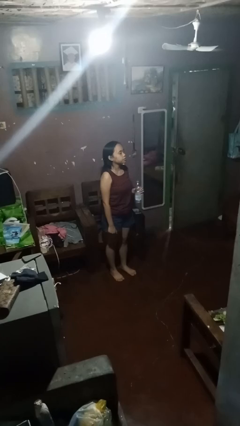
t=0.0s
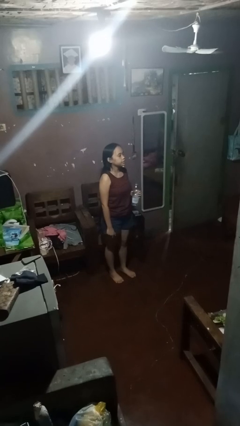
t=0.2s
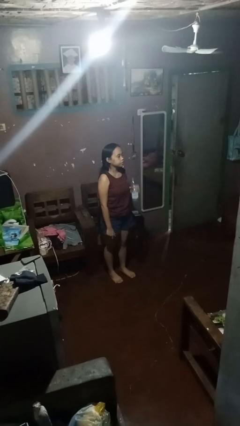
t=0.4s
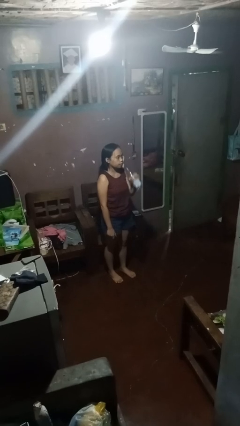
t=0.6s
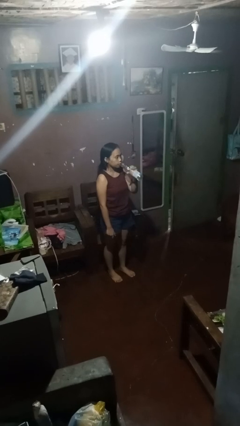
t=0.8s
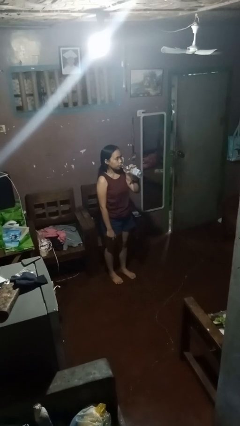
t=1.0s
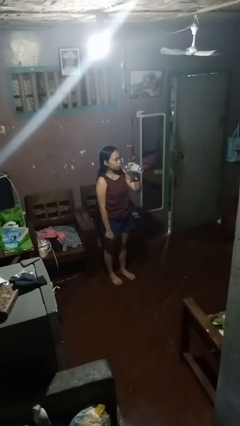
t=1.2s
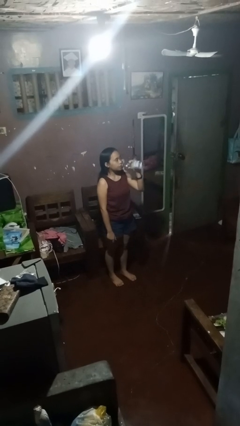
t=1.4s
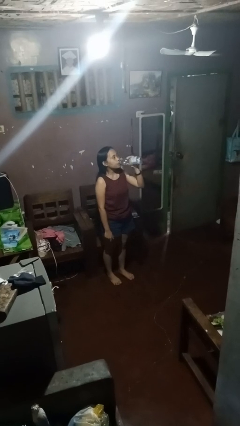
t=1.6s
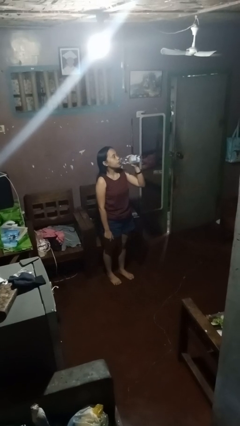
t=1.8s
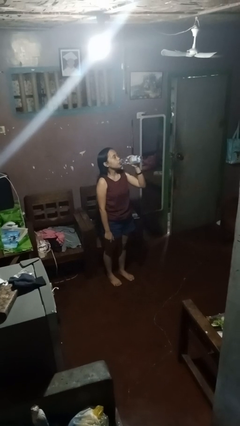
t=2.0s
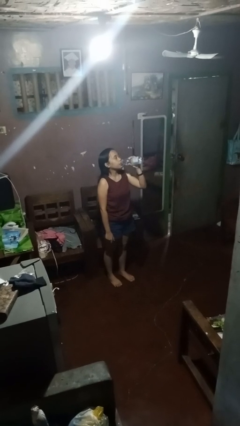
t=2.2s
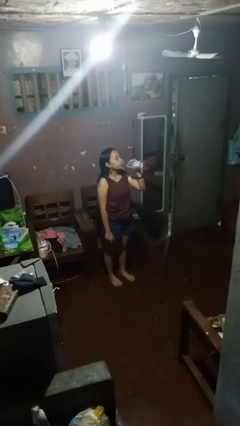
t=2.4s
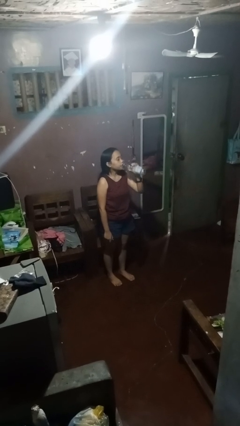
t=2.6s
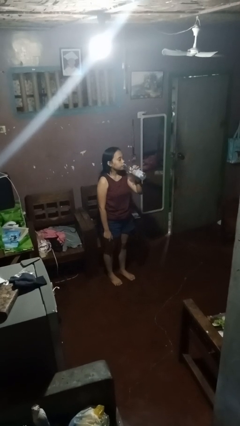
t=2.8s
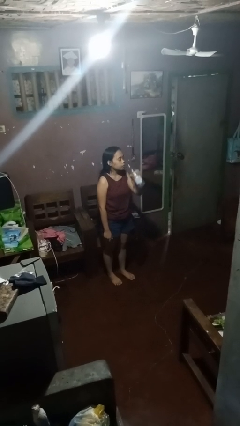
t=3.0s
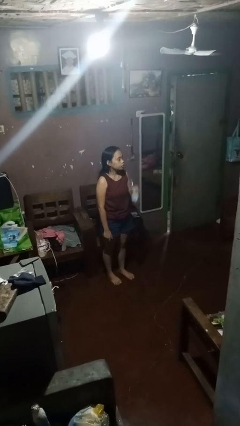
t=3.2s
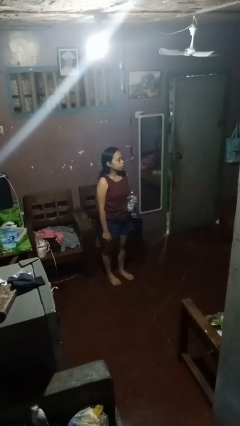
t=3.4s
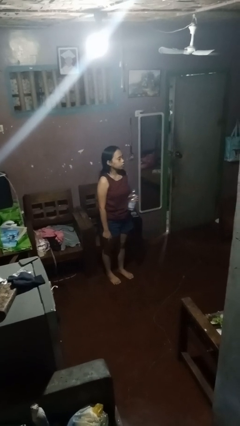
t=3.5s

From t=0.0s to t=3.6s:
person drinks from bottle

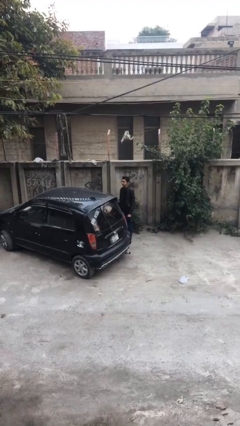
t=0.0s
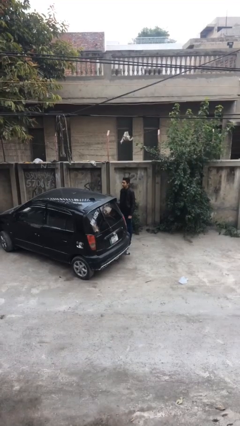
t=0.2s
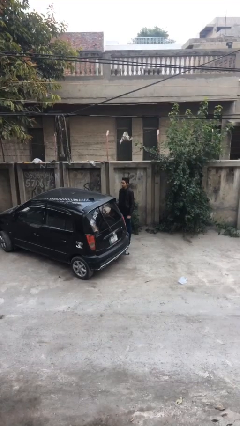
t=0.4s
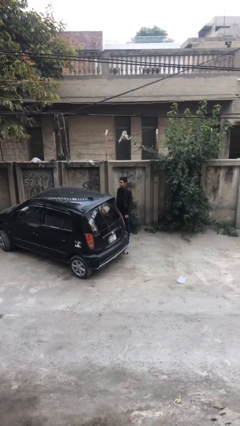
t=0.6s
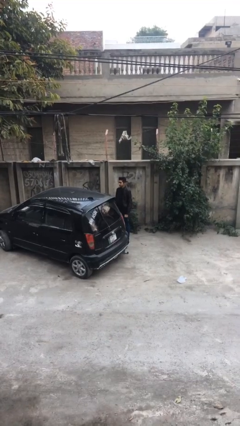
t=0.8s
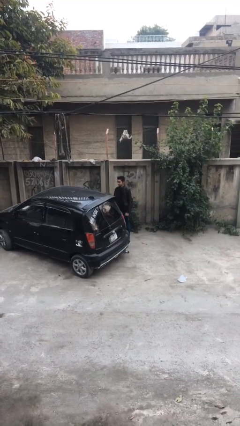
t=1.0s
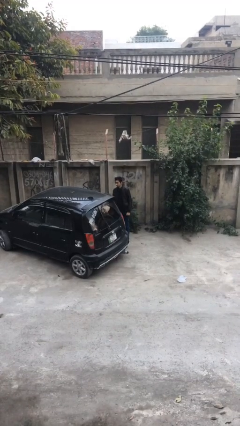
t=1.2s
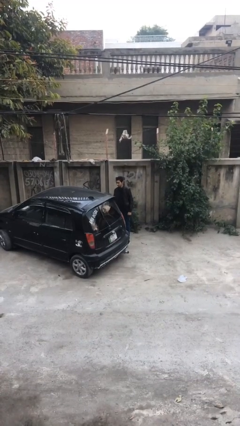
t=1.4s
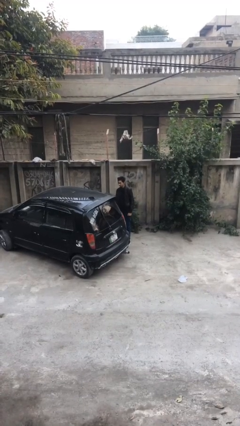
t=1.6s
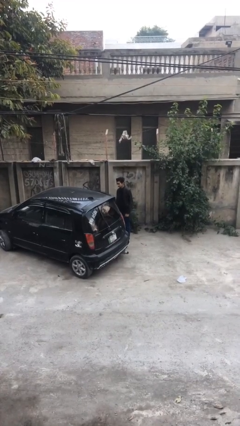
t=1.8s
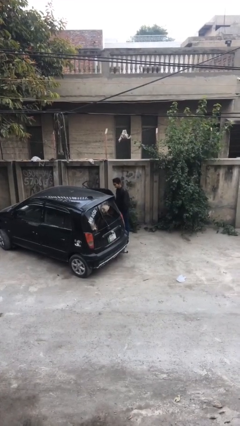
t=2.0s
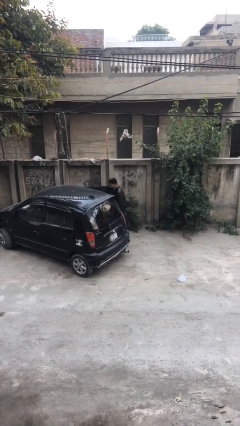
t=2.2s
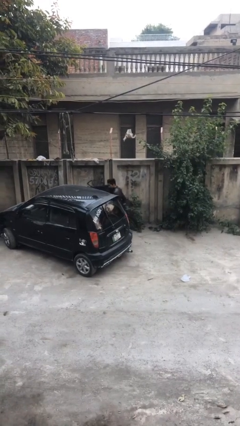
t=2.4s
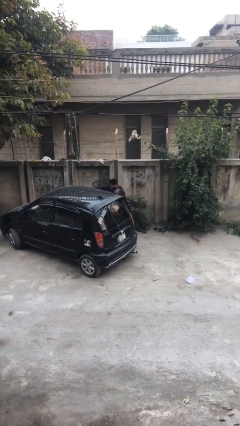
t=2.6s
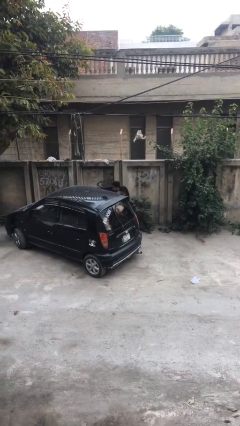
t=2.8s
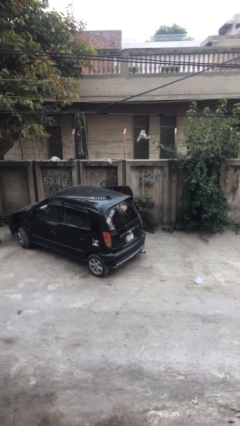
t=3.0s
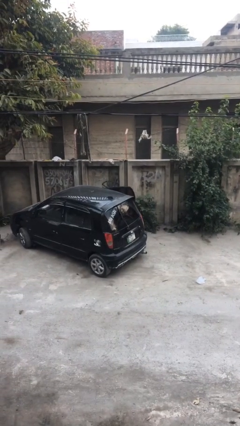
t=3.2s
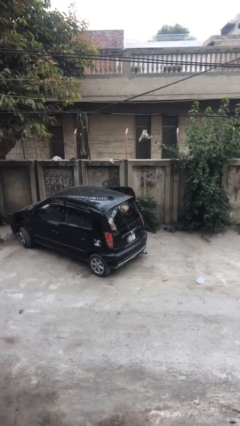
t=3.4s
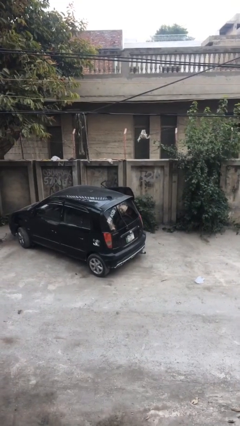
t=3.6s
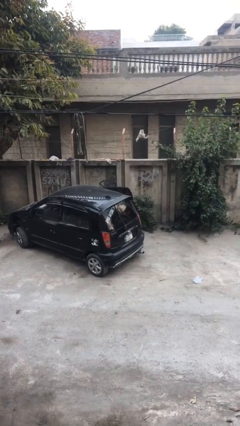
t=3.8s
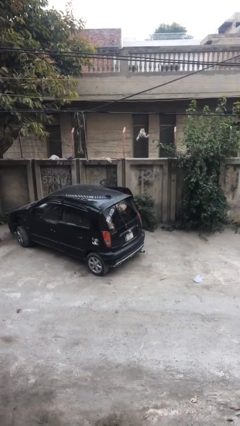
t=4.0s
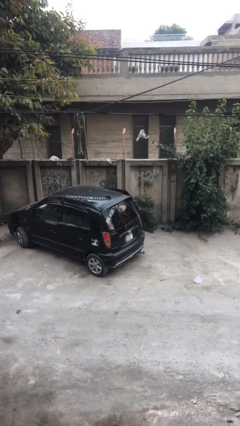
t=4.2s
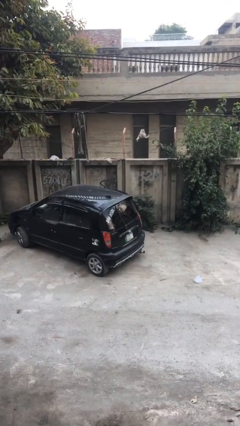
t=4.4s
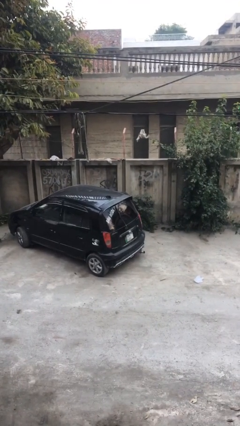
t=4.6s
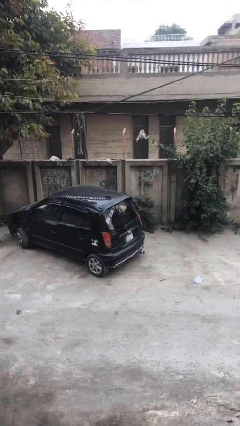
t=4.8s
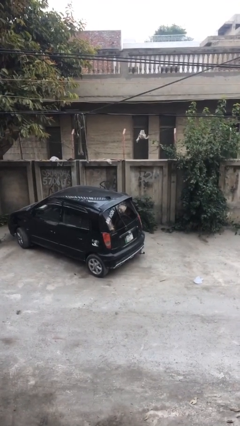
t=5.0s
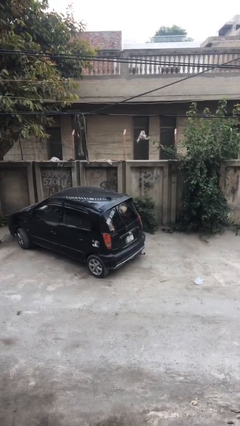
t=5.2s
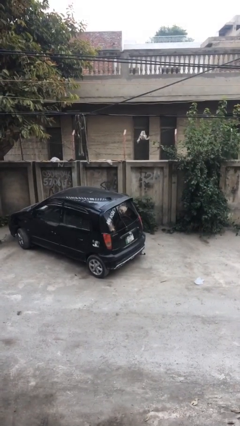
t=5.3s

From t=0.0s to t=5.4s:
person enters car

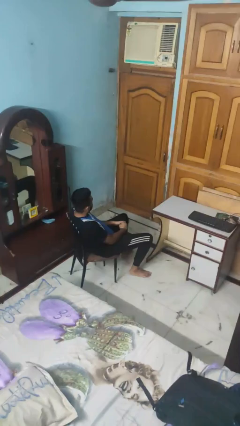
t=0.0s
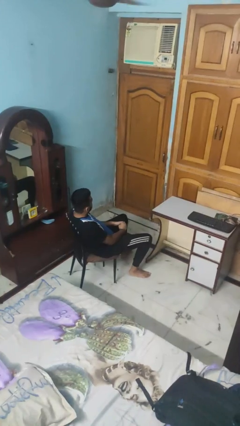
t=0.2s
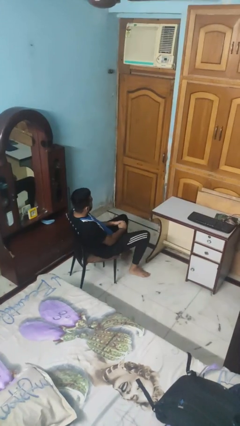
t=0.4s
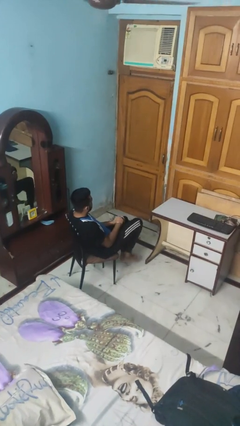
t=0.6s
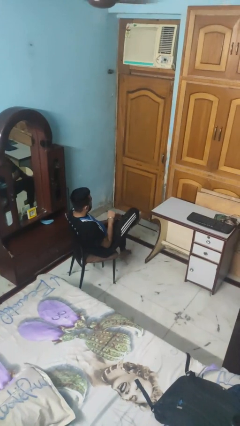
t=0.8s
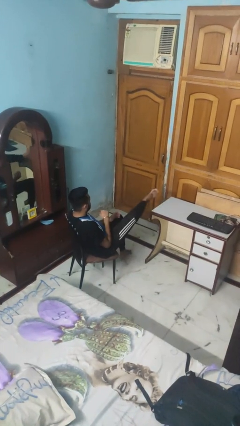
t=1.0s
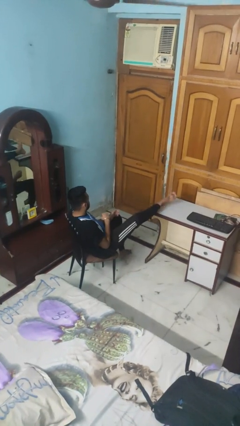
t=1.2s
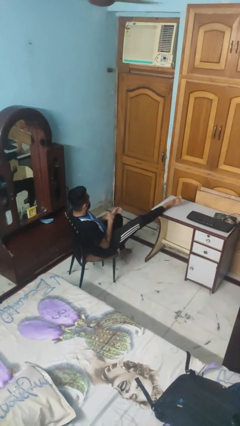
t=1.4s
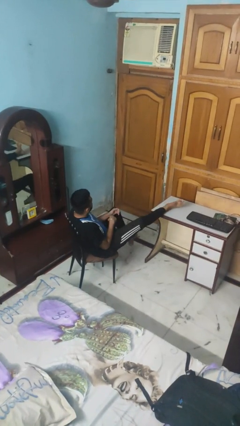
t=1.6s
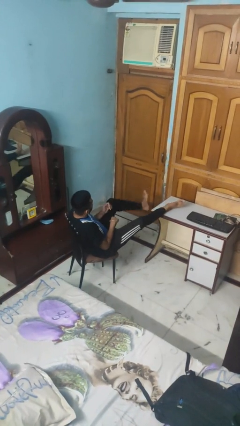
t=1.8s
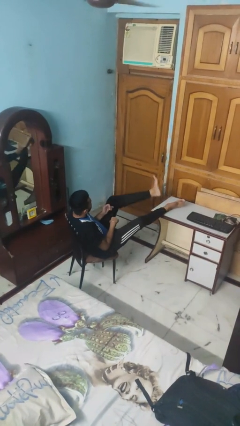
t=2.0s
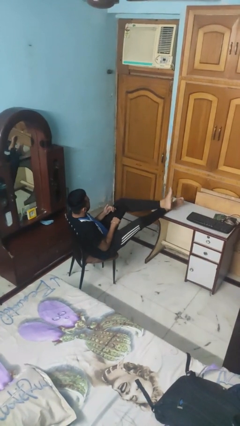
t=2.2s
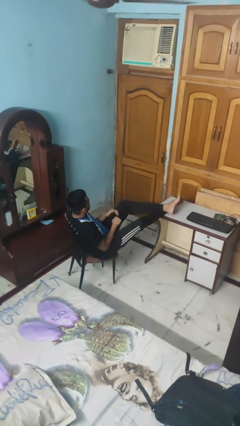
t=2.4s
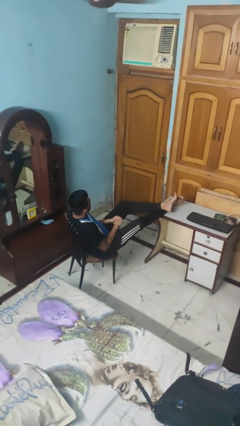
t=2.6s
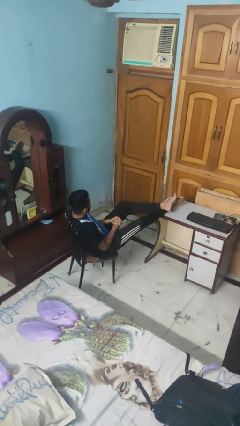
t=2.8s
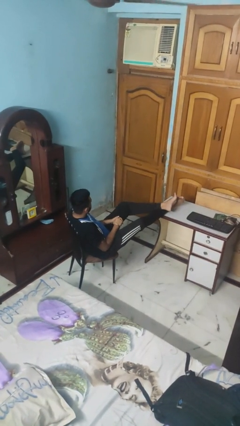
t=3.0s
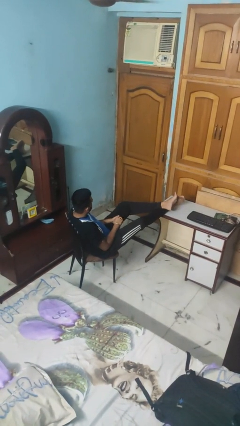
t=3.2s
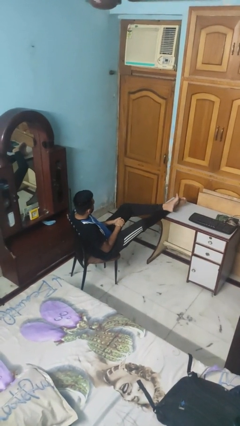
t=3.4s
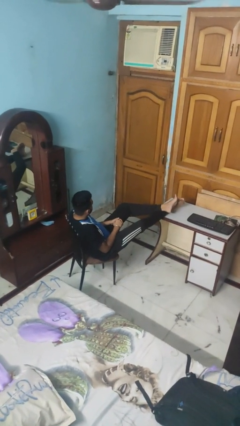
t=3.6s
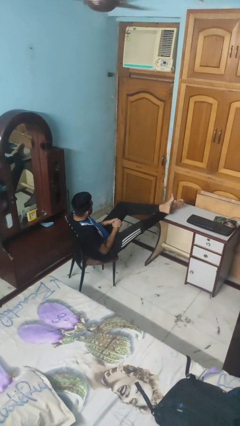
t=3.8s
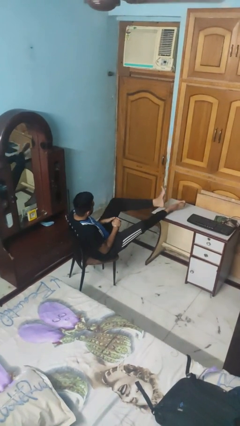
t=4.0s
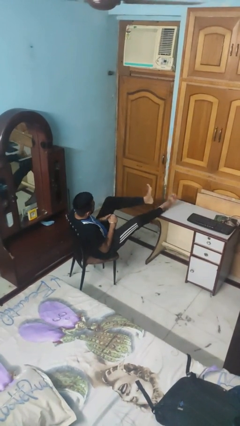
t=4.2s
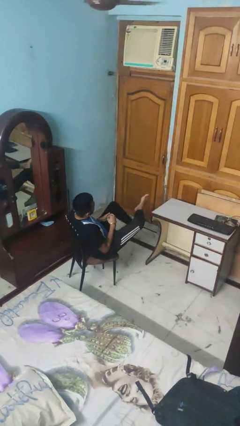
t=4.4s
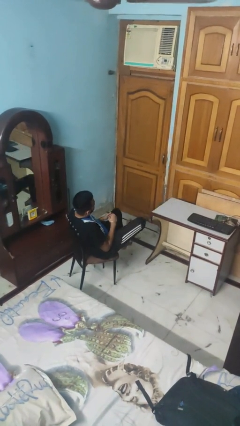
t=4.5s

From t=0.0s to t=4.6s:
person puts feet up

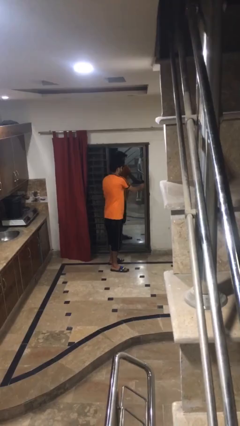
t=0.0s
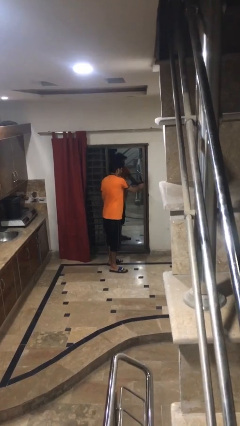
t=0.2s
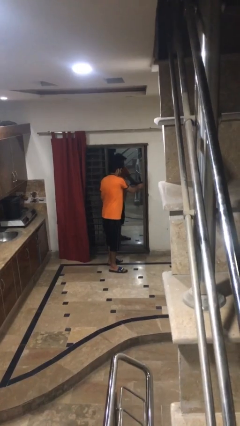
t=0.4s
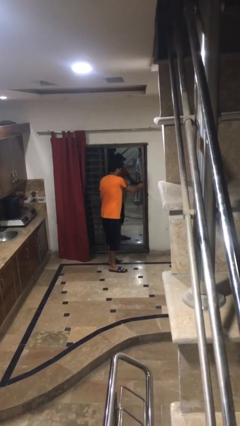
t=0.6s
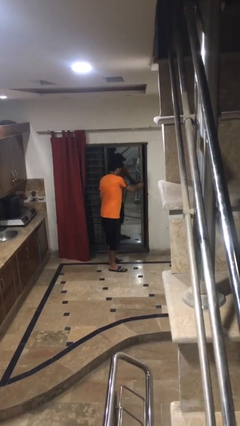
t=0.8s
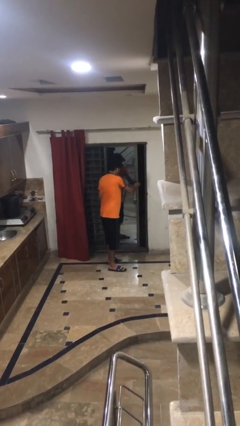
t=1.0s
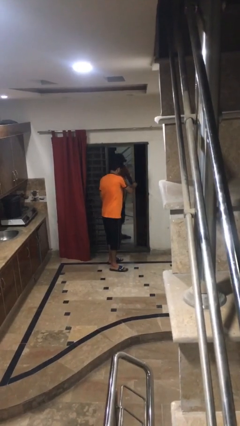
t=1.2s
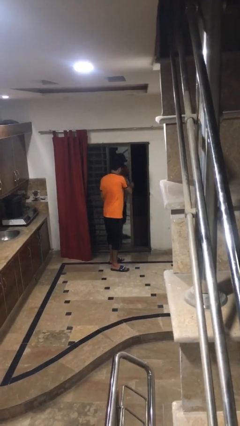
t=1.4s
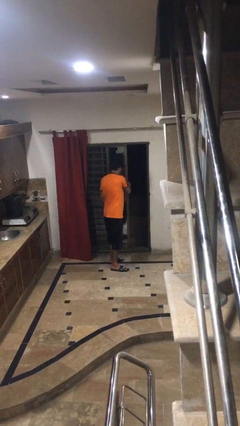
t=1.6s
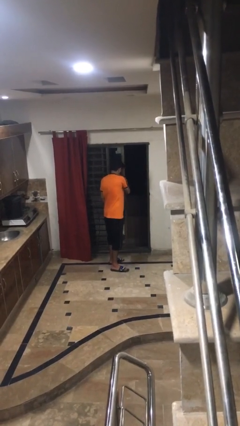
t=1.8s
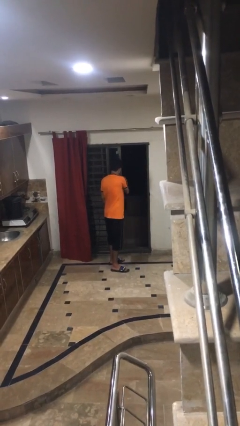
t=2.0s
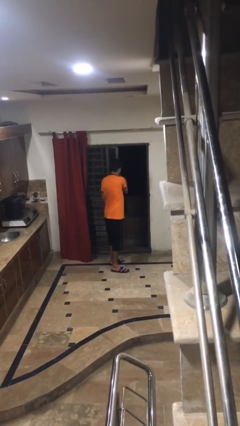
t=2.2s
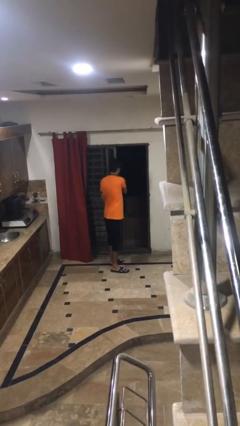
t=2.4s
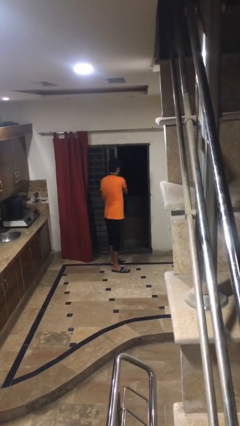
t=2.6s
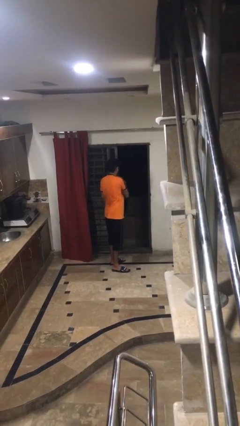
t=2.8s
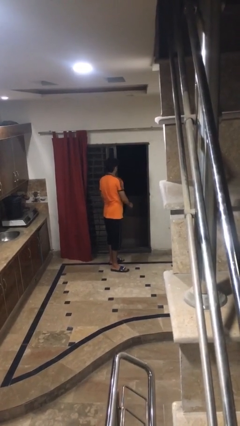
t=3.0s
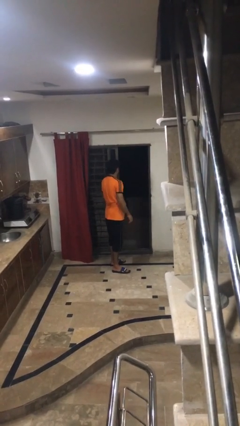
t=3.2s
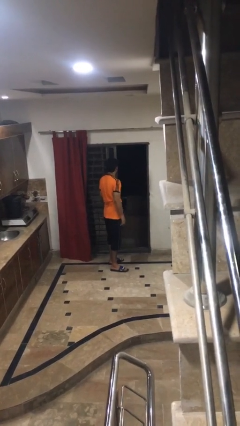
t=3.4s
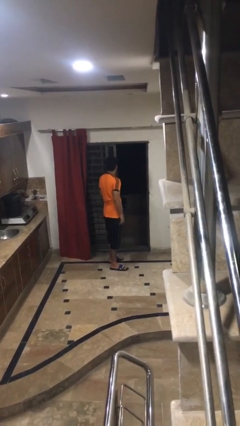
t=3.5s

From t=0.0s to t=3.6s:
person opens sliding door

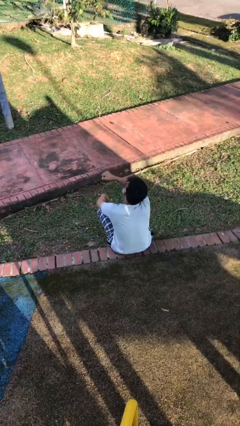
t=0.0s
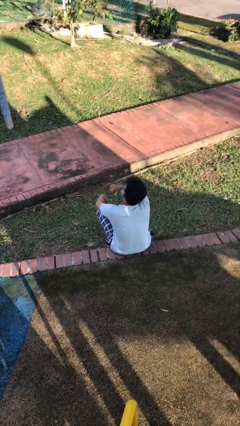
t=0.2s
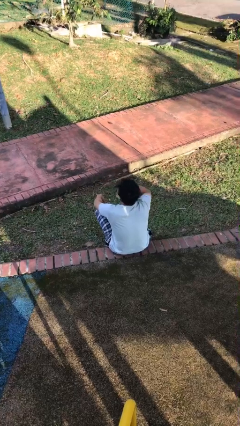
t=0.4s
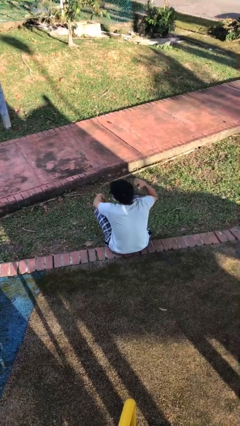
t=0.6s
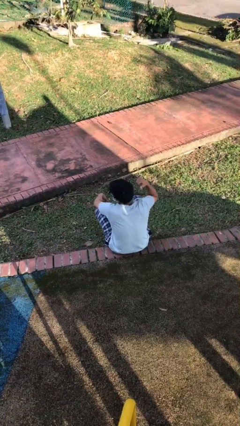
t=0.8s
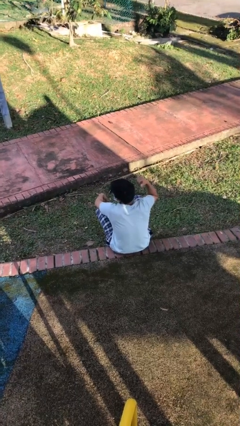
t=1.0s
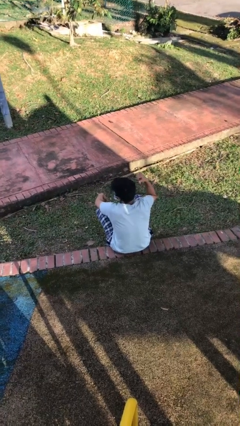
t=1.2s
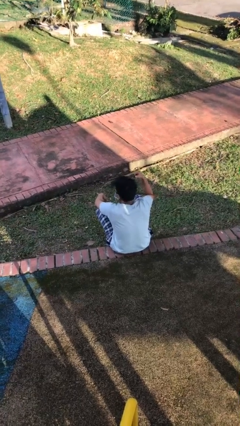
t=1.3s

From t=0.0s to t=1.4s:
person gestures cut
